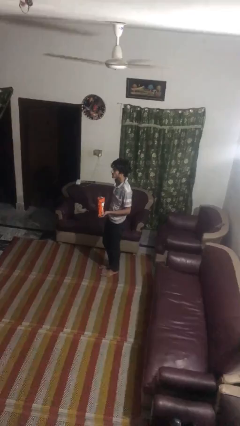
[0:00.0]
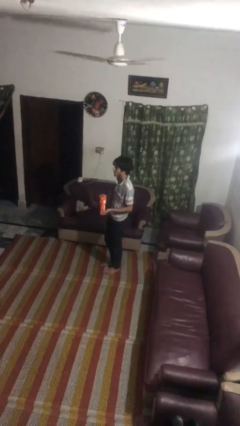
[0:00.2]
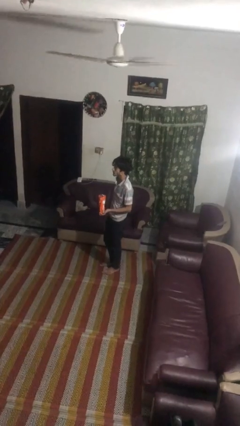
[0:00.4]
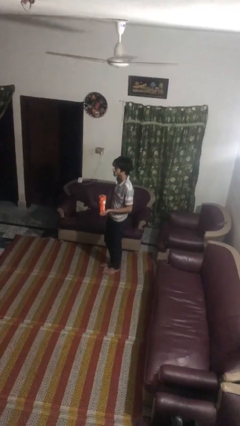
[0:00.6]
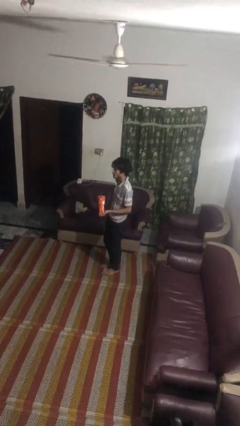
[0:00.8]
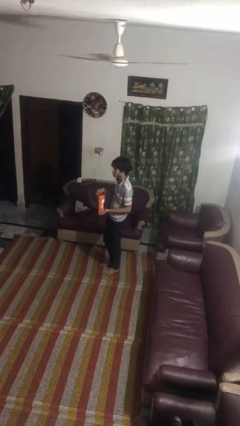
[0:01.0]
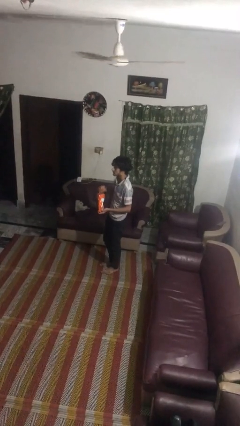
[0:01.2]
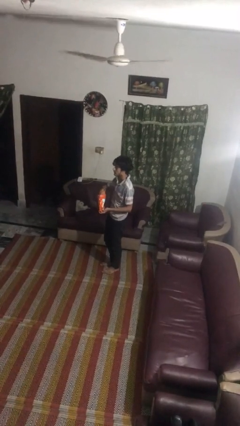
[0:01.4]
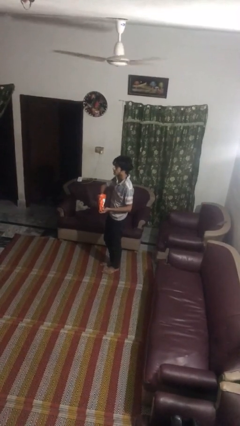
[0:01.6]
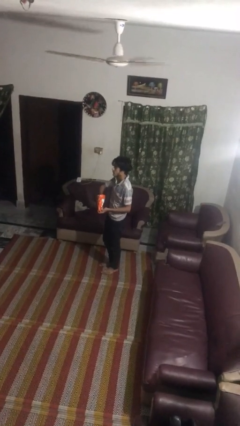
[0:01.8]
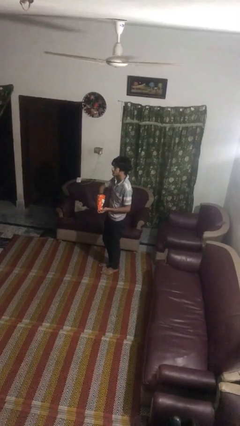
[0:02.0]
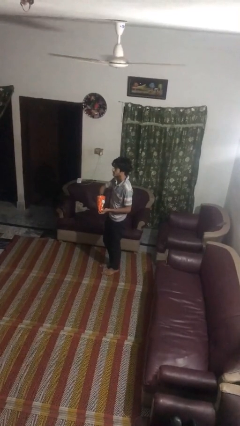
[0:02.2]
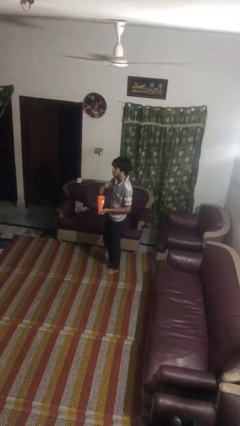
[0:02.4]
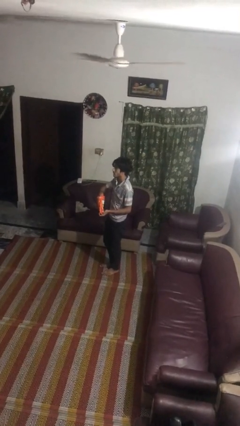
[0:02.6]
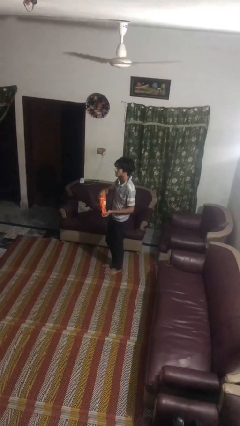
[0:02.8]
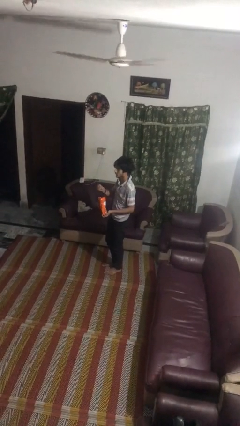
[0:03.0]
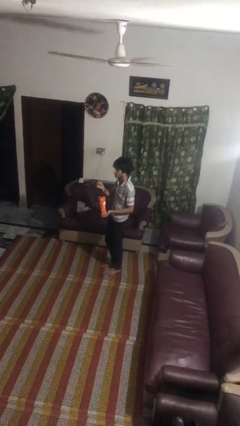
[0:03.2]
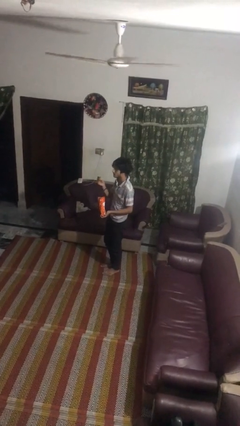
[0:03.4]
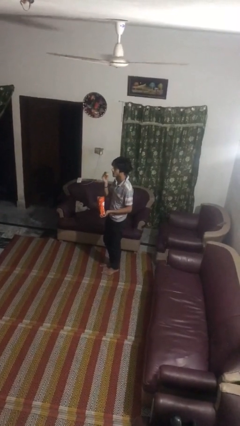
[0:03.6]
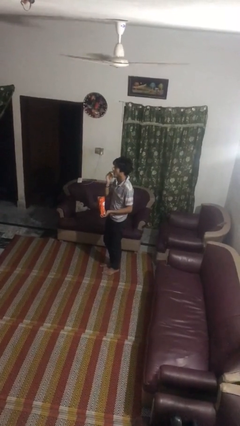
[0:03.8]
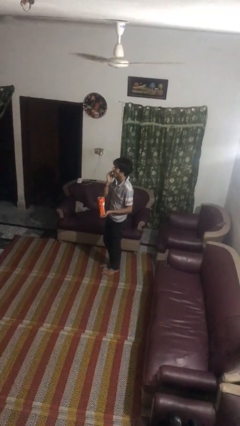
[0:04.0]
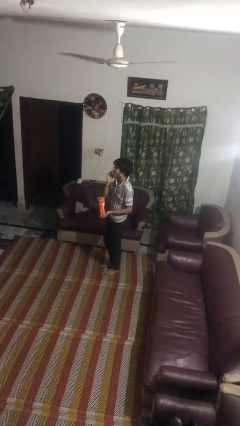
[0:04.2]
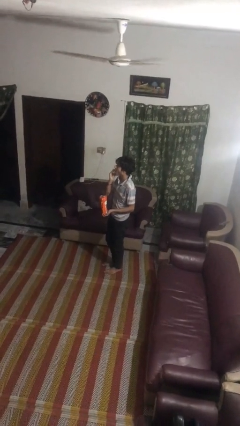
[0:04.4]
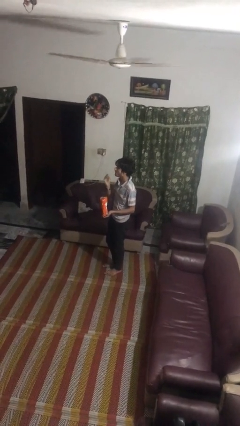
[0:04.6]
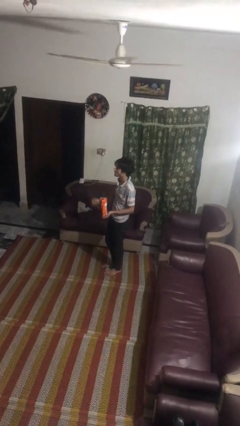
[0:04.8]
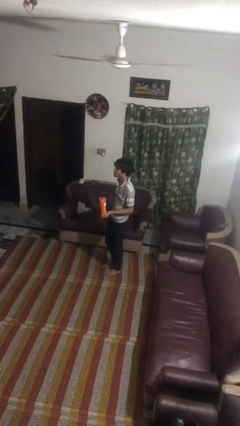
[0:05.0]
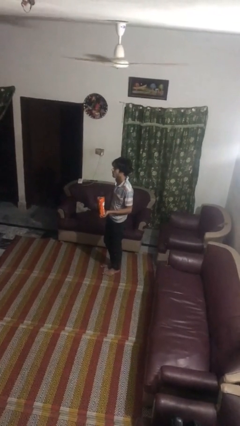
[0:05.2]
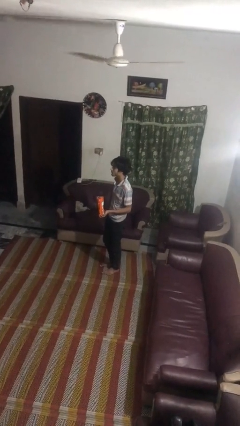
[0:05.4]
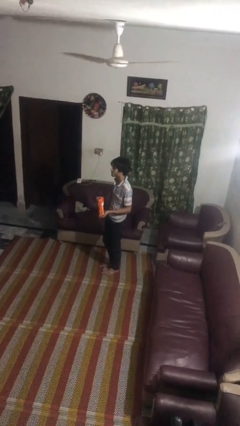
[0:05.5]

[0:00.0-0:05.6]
person eats snack from bag

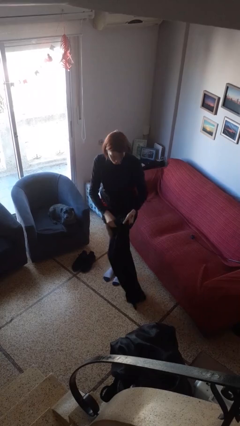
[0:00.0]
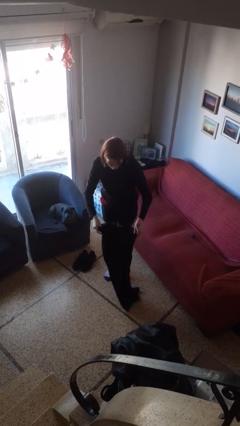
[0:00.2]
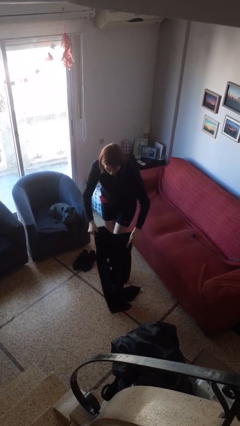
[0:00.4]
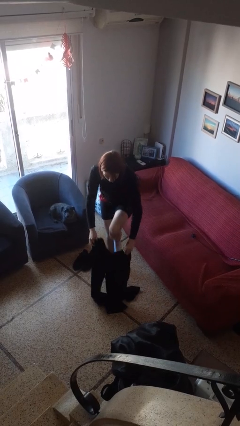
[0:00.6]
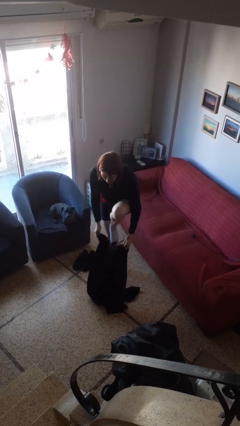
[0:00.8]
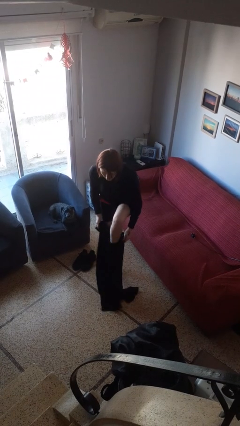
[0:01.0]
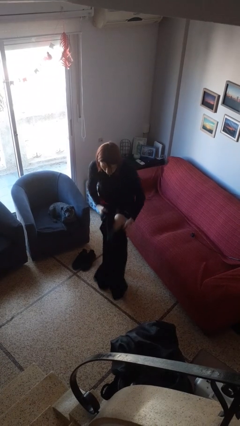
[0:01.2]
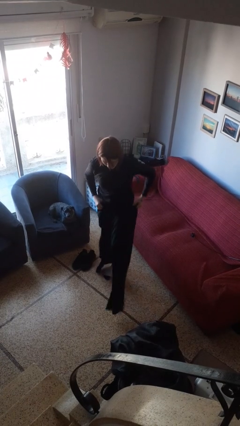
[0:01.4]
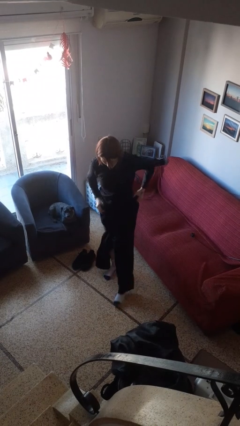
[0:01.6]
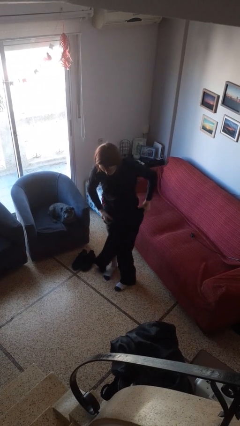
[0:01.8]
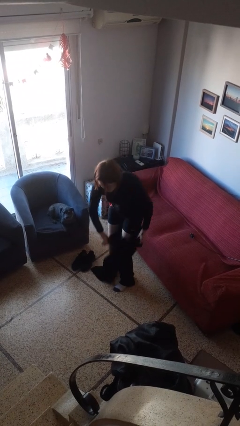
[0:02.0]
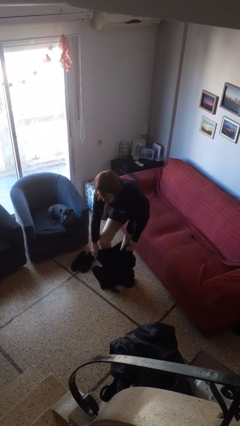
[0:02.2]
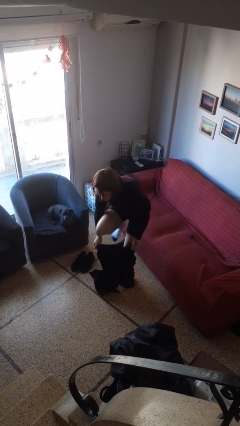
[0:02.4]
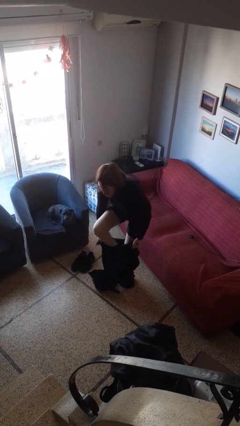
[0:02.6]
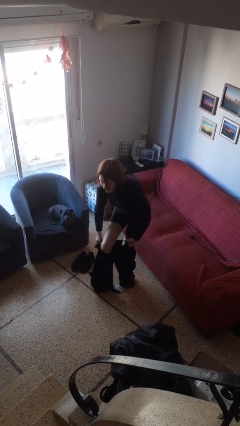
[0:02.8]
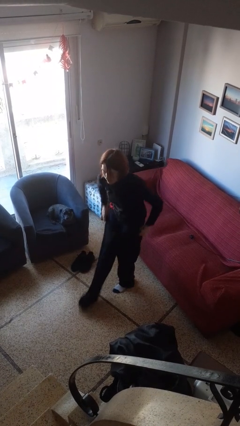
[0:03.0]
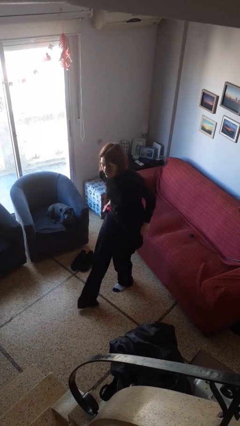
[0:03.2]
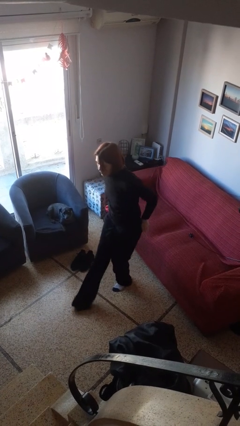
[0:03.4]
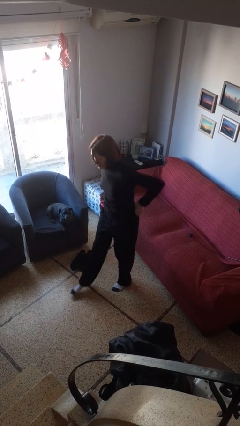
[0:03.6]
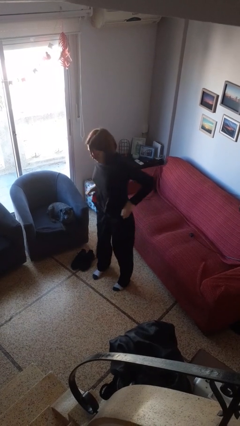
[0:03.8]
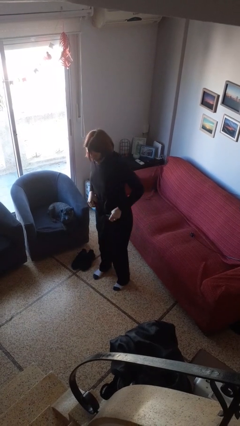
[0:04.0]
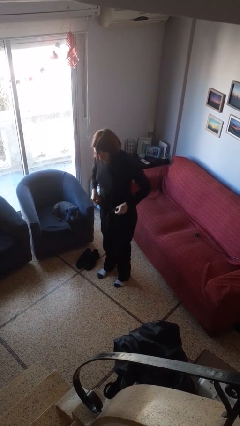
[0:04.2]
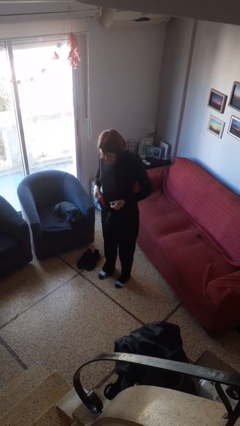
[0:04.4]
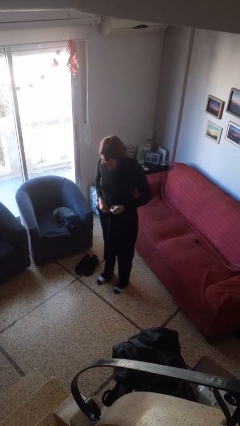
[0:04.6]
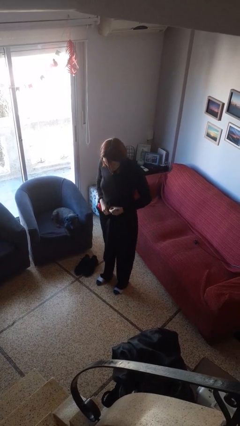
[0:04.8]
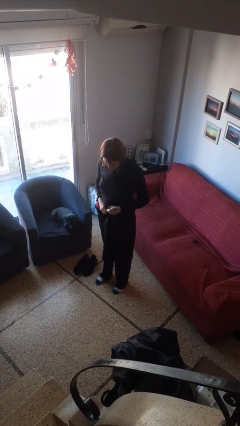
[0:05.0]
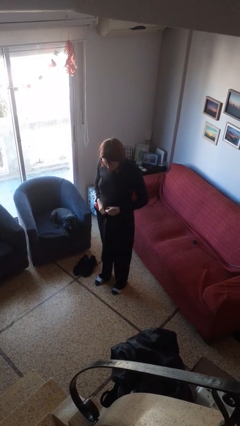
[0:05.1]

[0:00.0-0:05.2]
person puts on pants

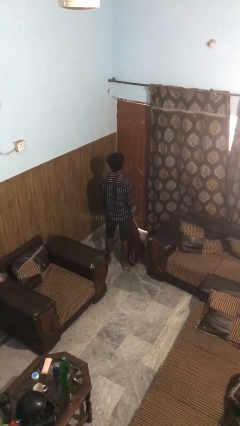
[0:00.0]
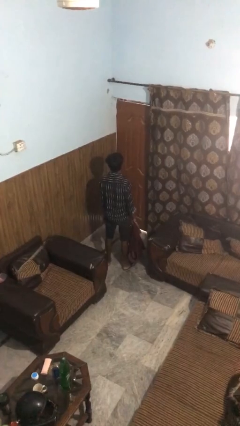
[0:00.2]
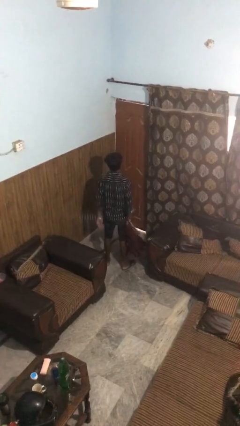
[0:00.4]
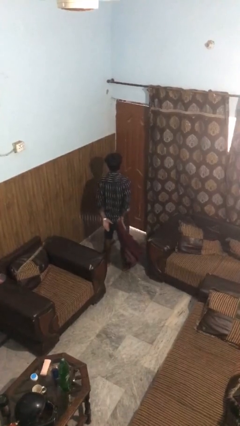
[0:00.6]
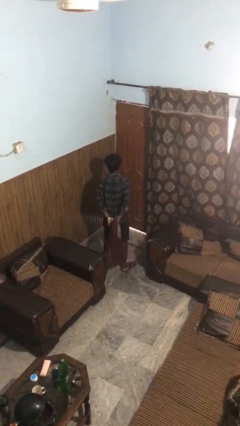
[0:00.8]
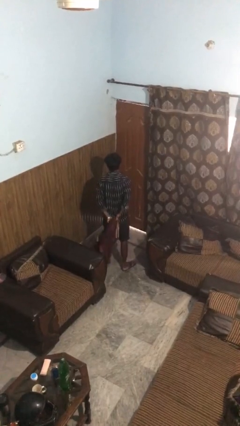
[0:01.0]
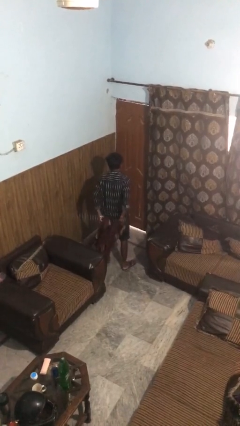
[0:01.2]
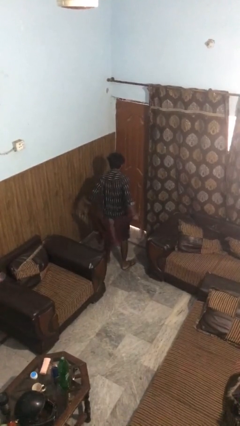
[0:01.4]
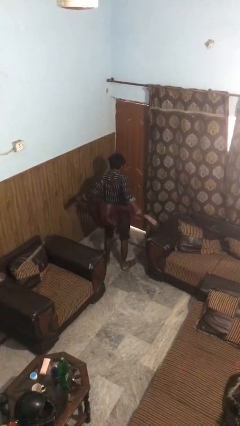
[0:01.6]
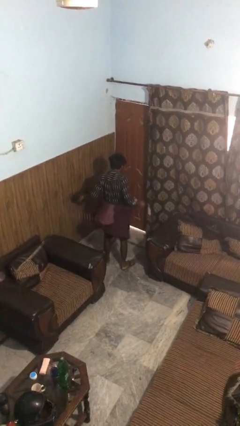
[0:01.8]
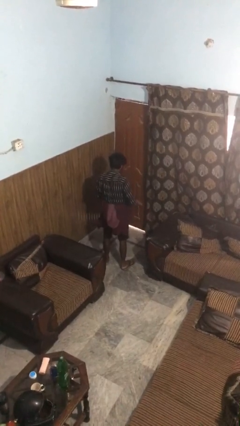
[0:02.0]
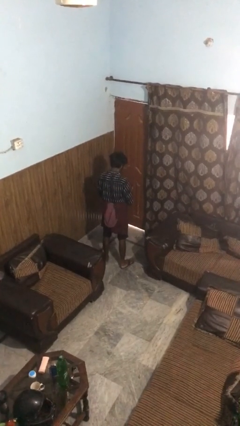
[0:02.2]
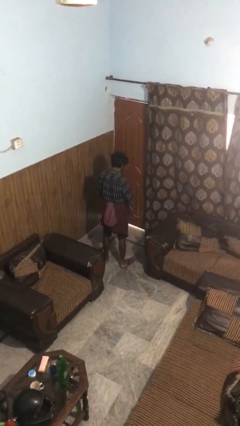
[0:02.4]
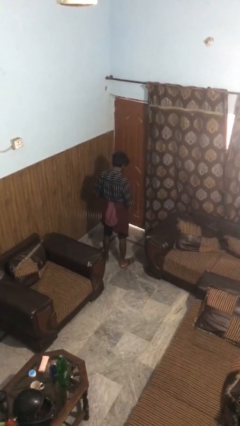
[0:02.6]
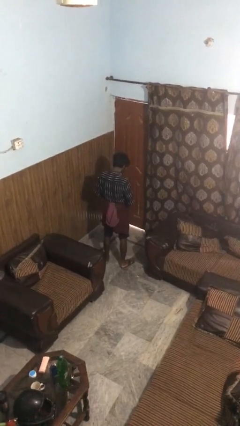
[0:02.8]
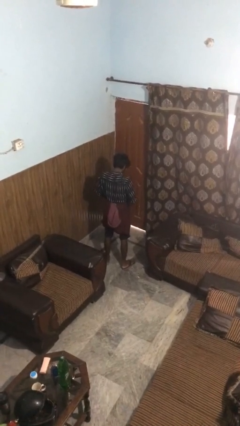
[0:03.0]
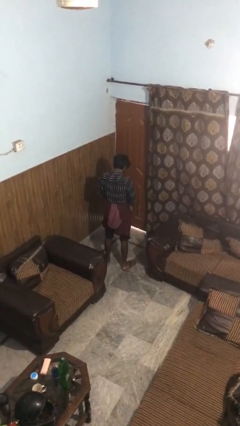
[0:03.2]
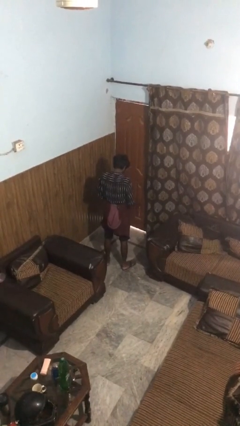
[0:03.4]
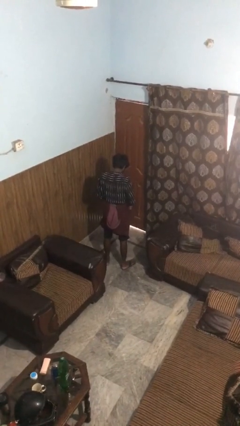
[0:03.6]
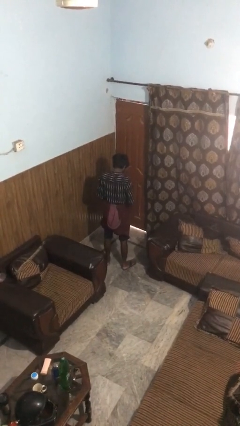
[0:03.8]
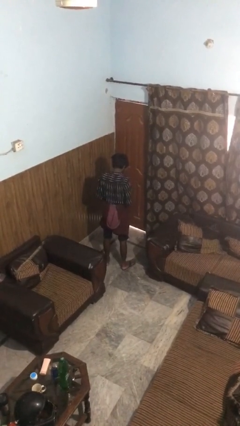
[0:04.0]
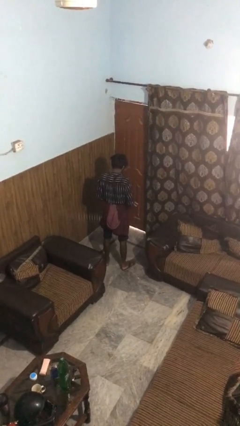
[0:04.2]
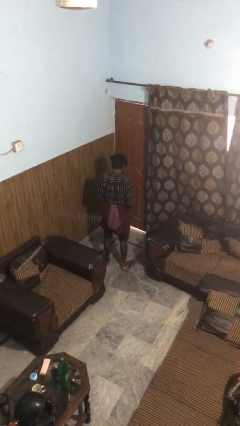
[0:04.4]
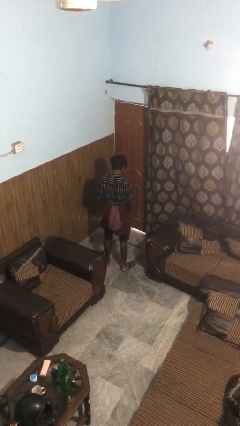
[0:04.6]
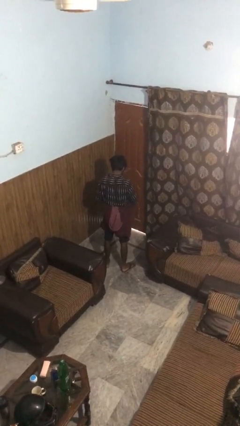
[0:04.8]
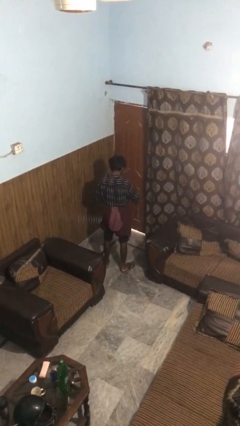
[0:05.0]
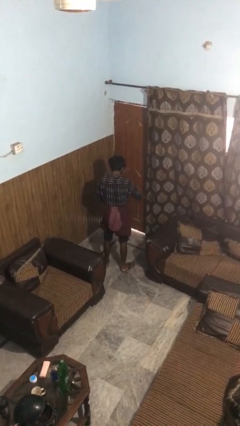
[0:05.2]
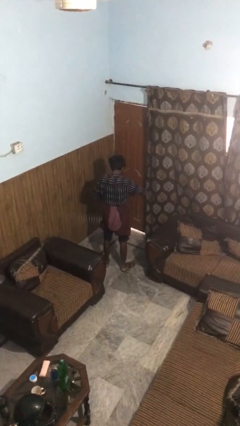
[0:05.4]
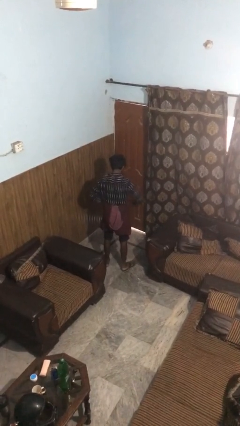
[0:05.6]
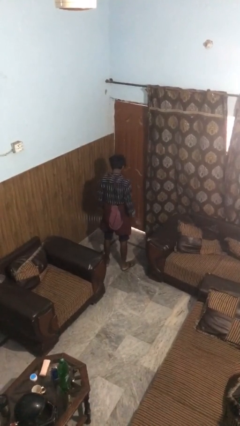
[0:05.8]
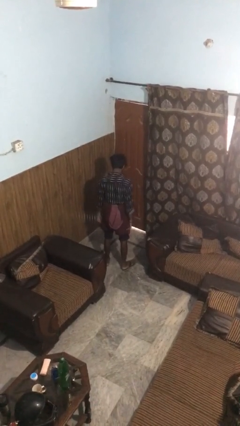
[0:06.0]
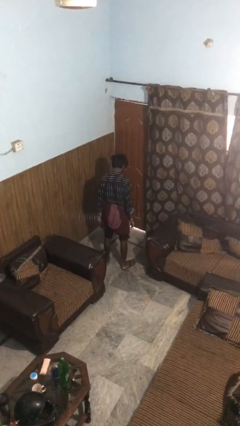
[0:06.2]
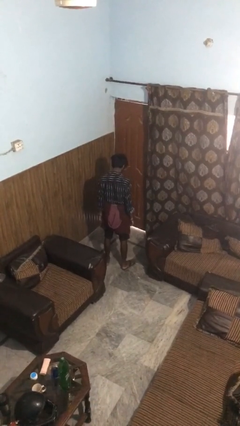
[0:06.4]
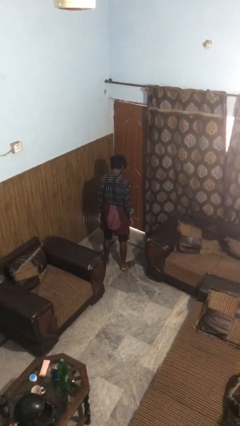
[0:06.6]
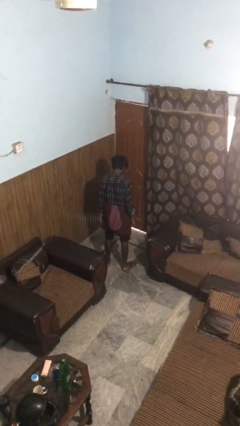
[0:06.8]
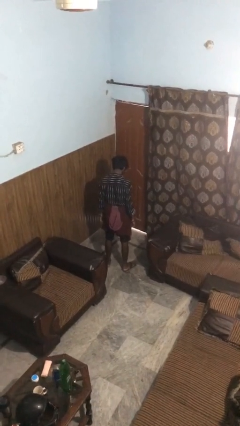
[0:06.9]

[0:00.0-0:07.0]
person ties jacket around waist
